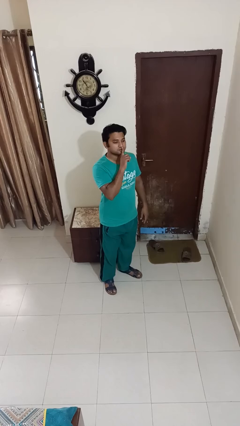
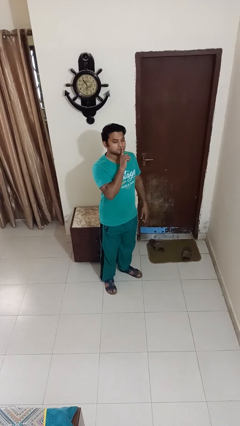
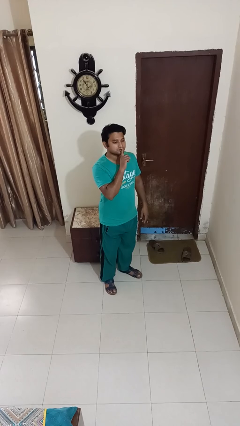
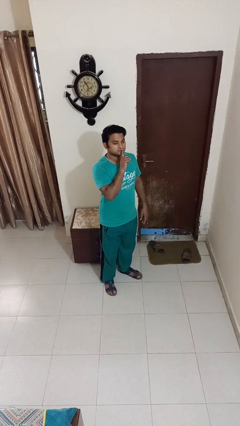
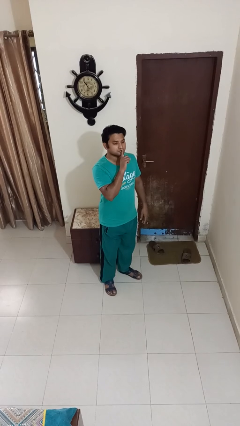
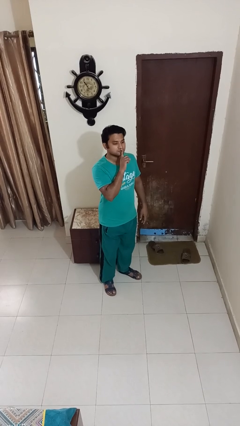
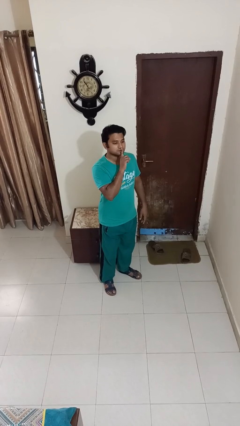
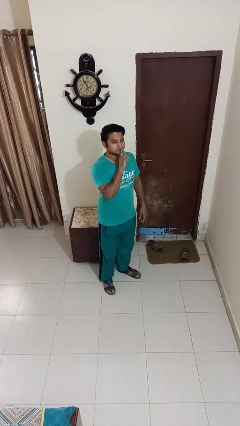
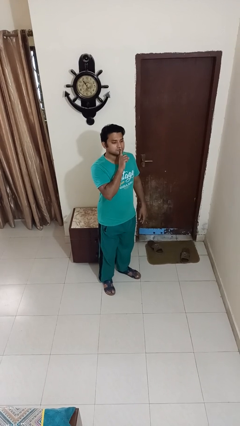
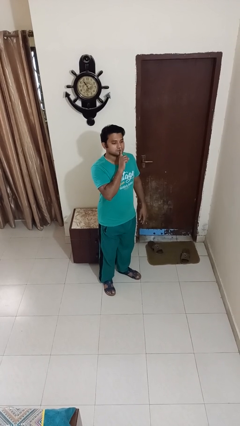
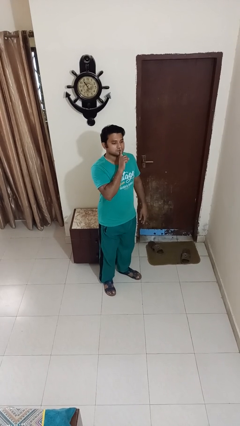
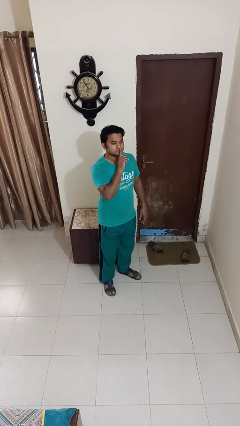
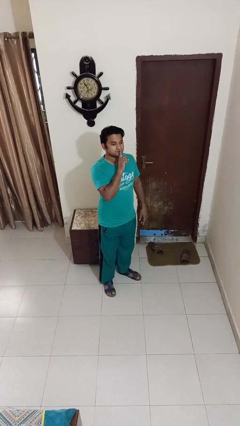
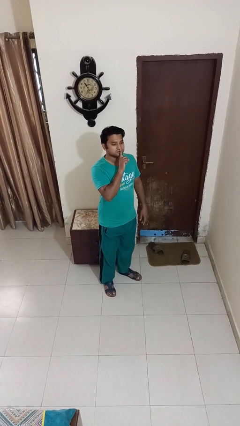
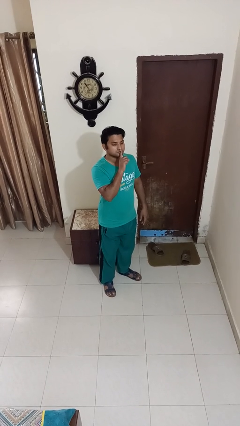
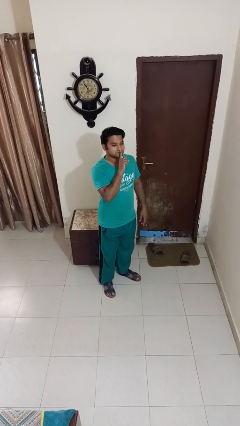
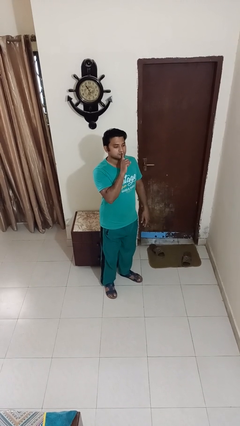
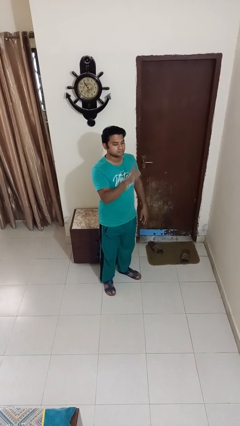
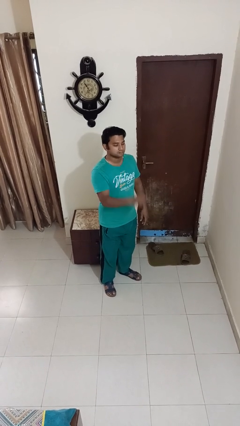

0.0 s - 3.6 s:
person gestures be quiet

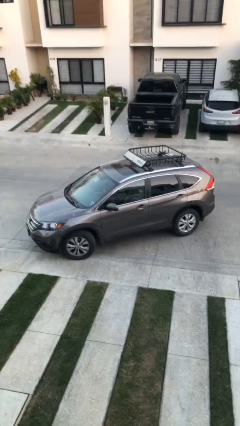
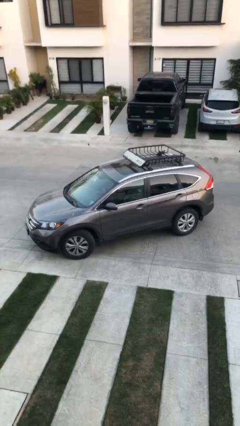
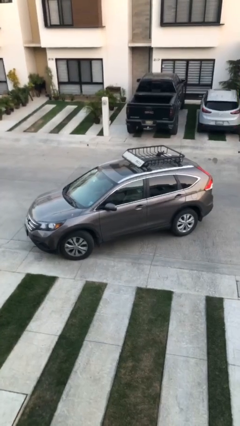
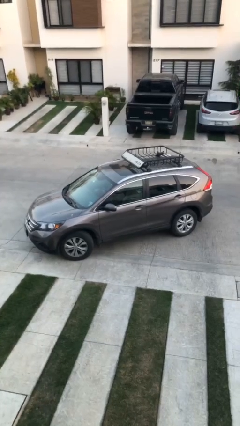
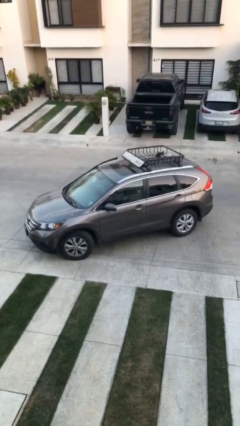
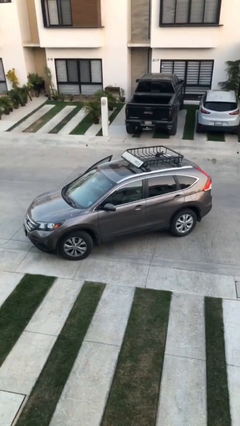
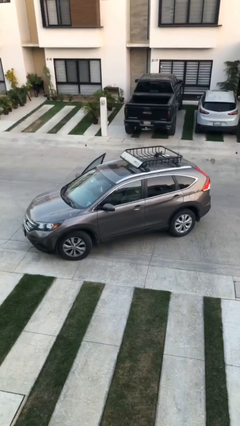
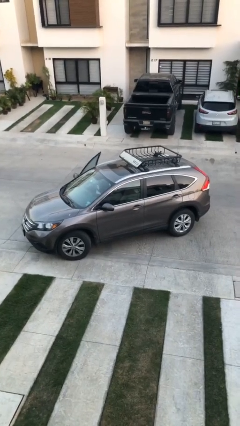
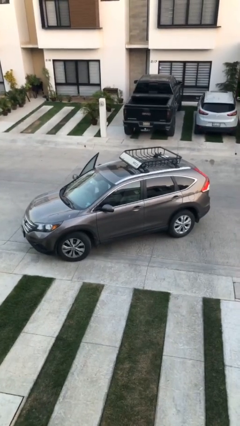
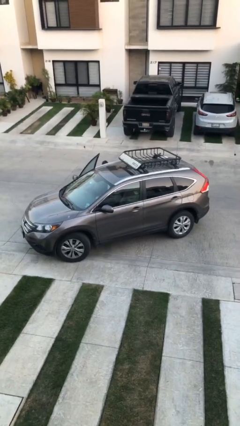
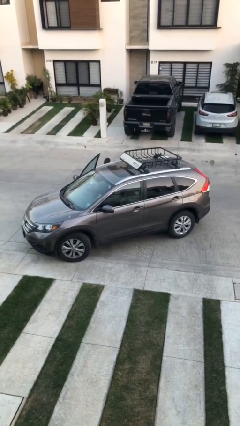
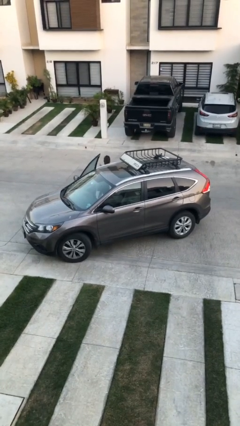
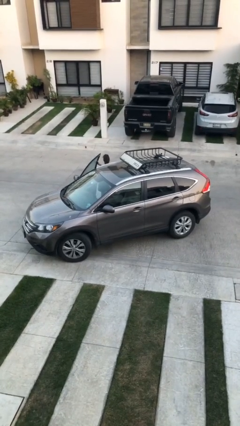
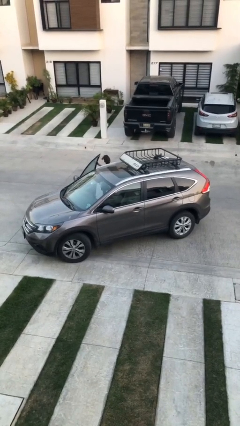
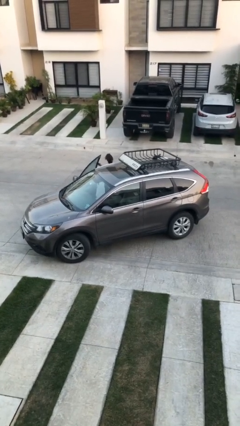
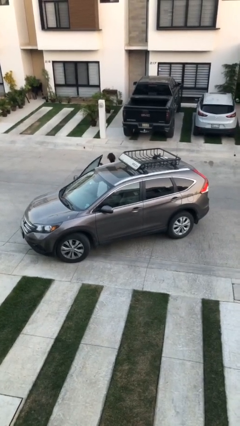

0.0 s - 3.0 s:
car drops off person

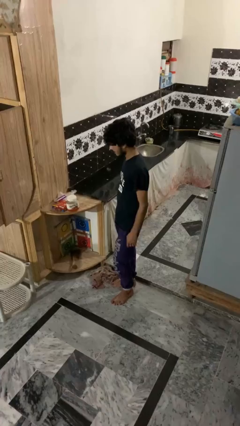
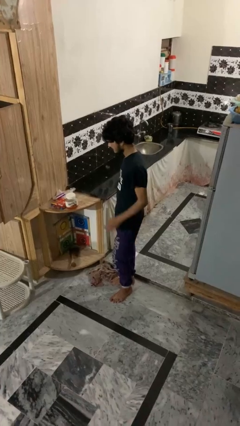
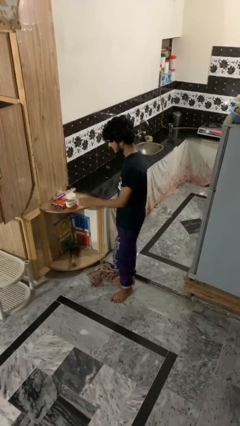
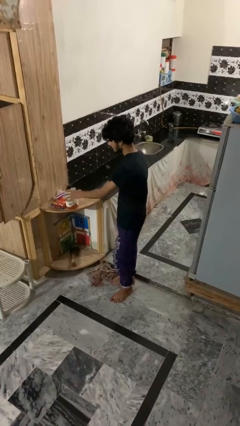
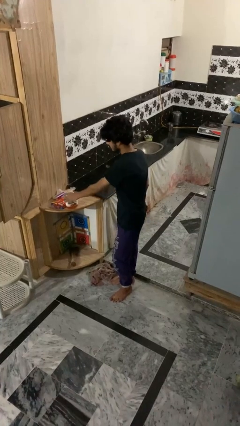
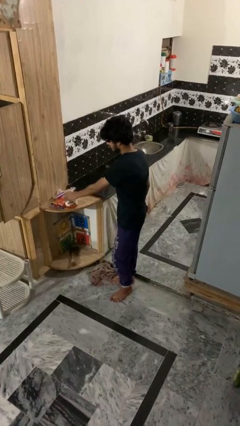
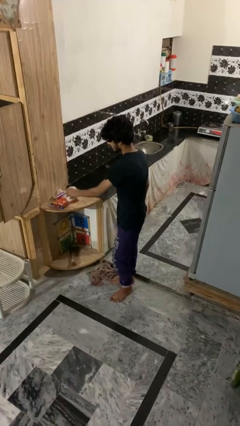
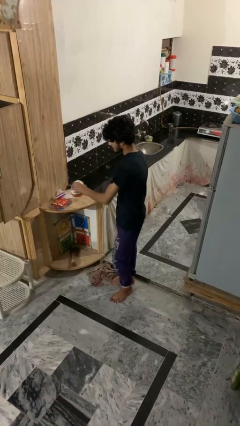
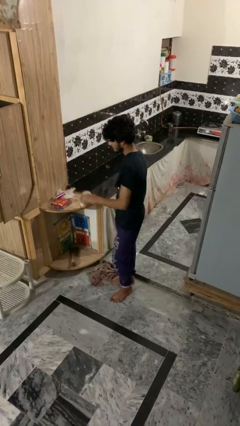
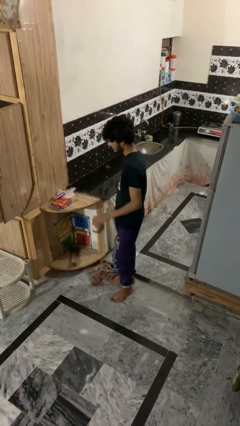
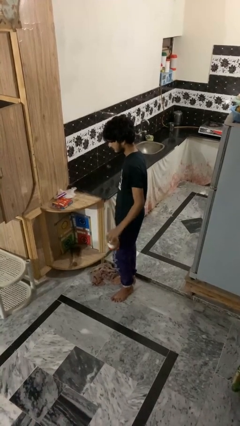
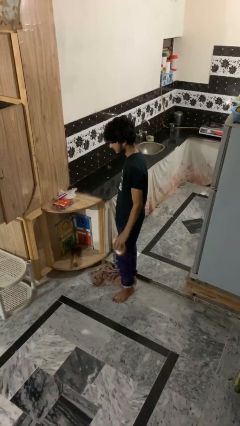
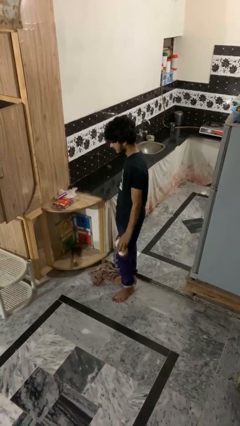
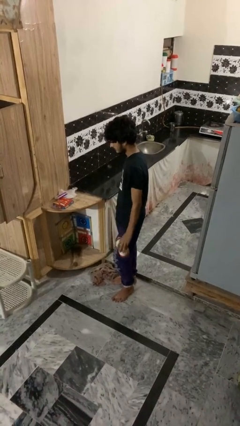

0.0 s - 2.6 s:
person picks up object from countertop

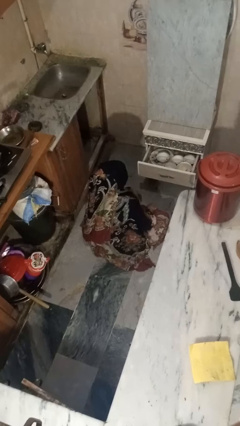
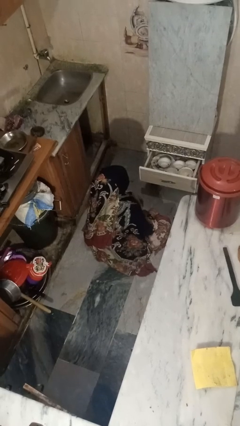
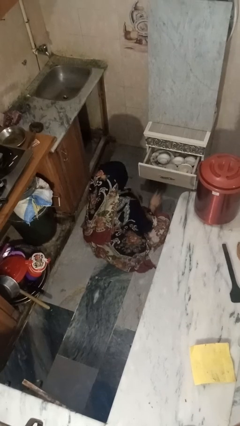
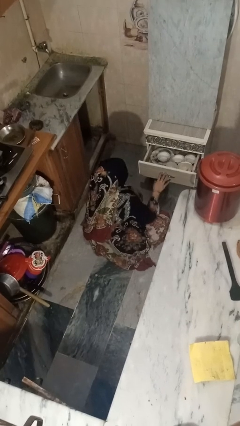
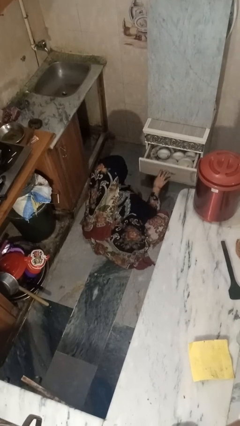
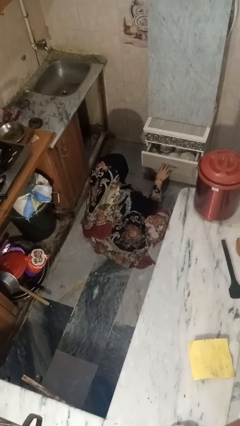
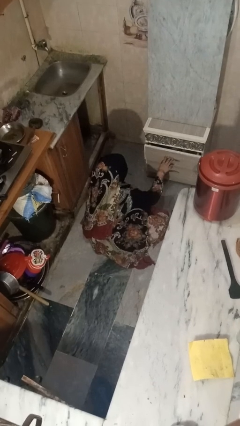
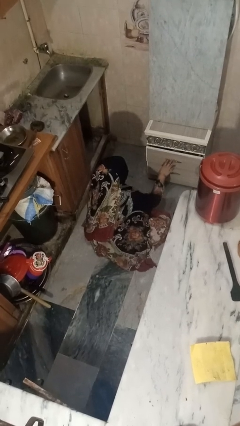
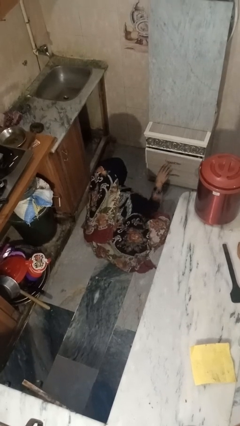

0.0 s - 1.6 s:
person closes kitchen drawer

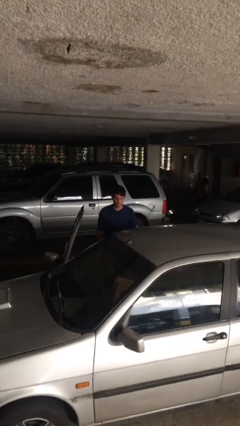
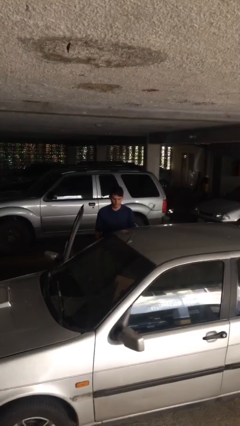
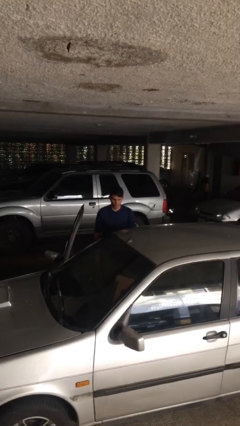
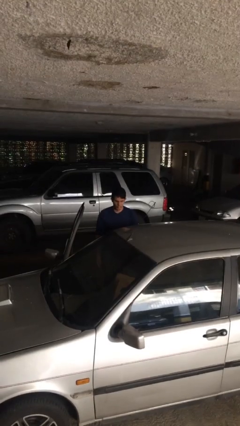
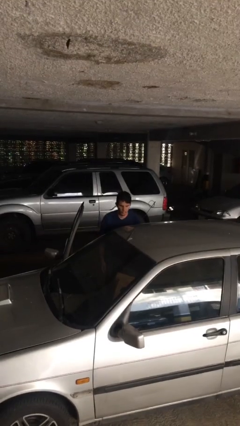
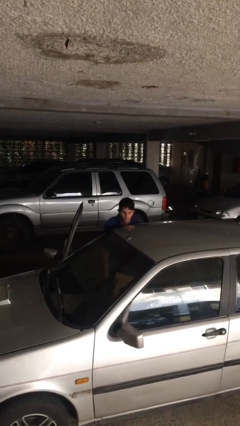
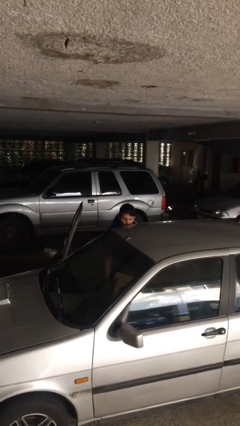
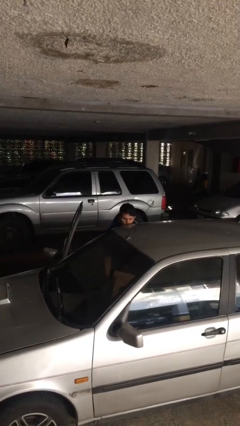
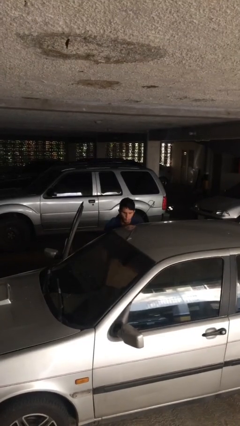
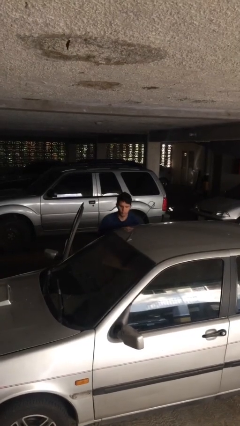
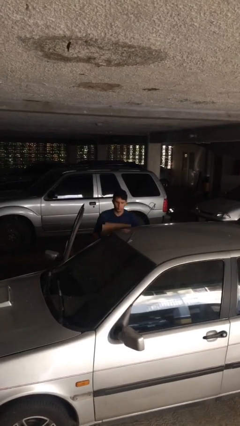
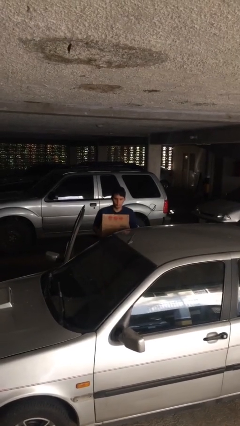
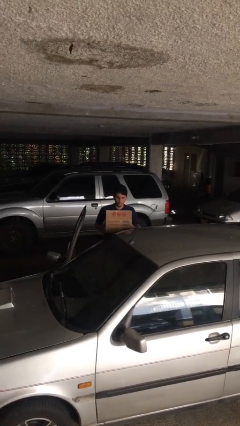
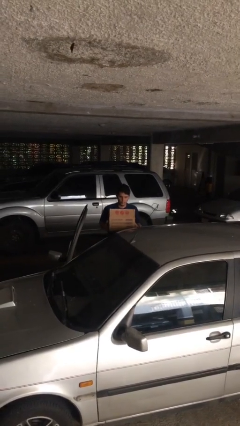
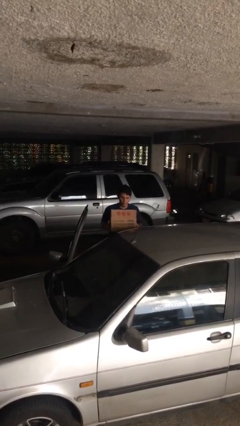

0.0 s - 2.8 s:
person unloads car

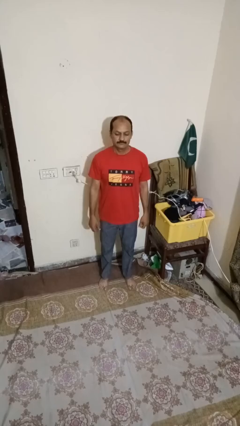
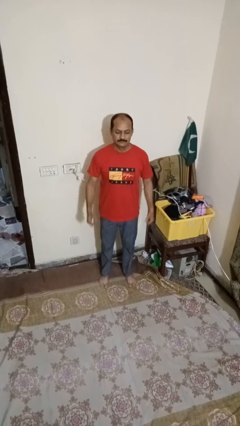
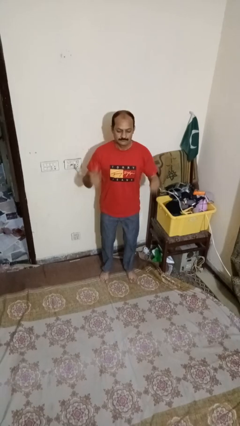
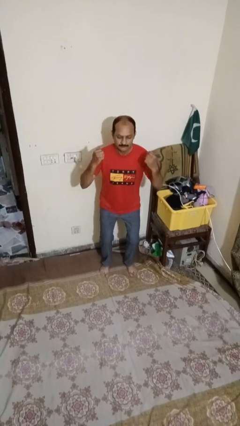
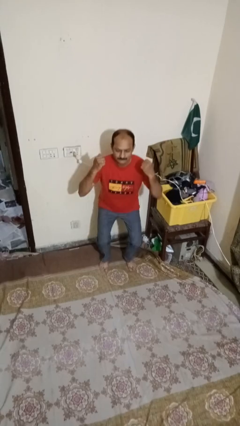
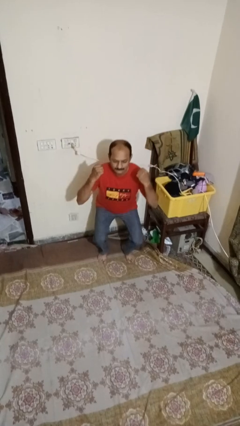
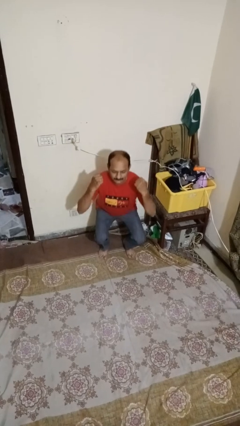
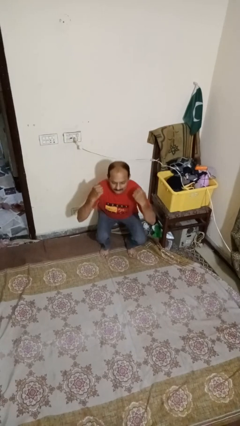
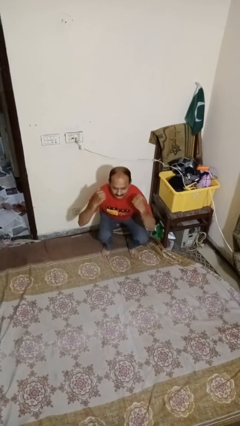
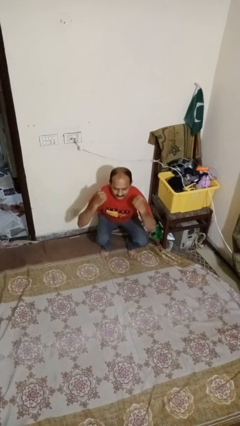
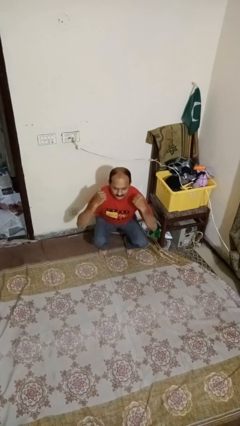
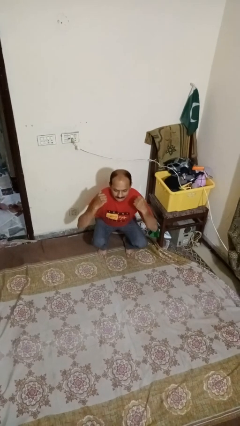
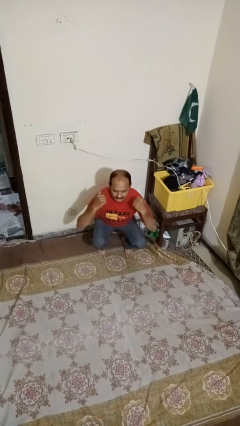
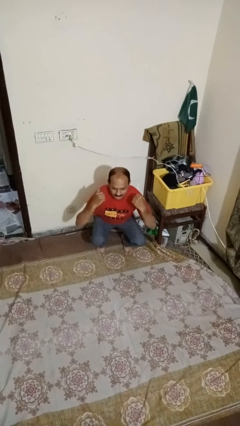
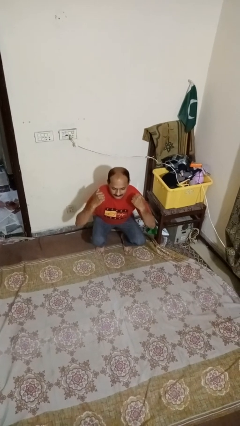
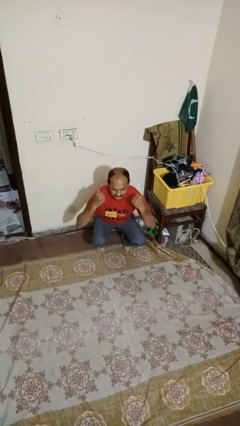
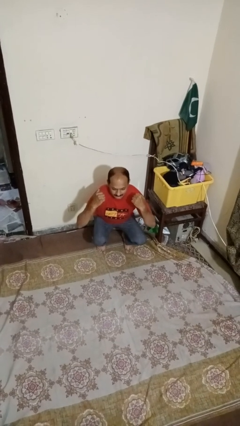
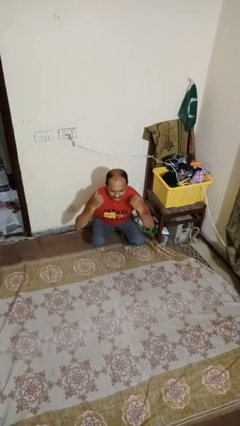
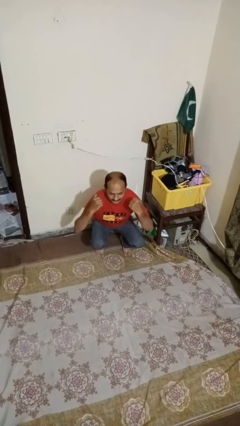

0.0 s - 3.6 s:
person squats

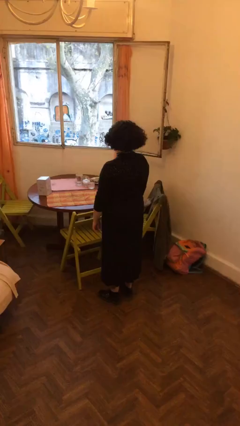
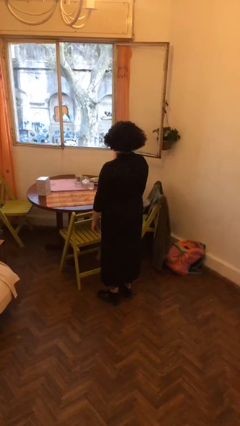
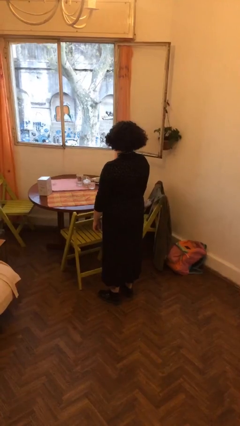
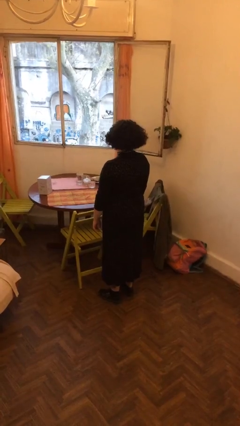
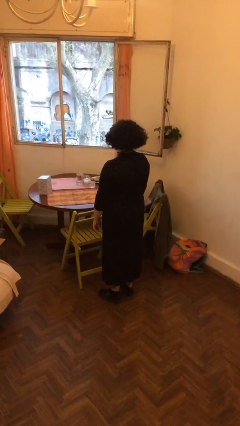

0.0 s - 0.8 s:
person pulls out chair
